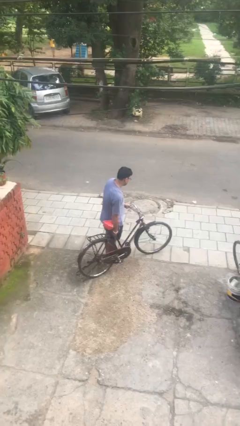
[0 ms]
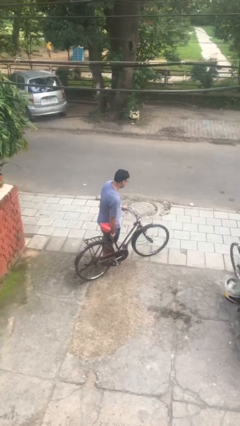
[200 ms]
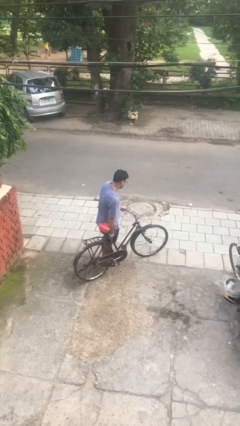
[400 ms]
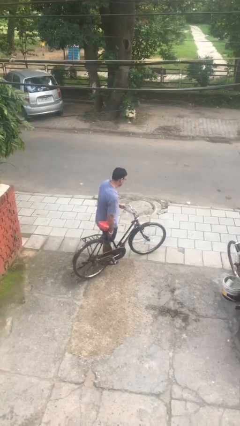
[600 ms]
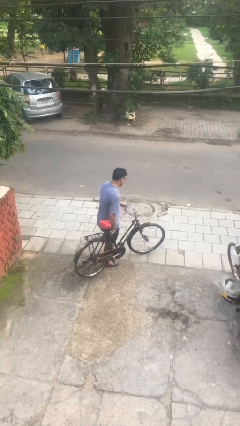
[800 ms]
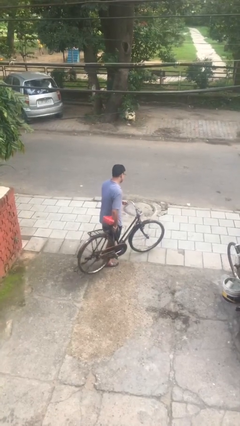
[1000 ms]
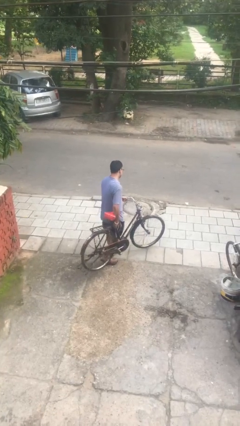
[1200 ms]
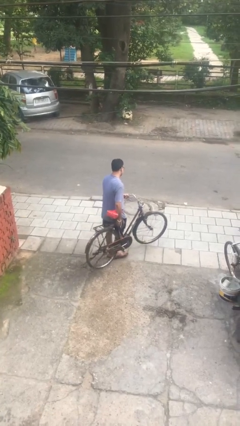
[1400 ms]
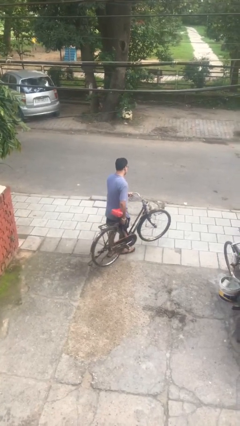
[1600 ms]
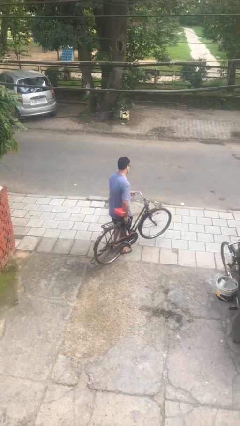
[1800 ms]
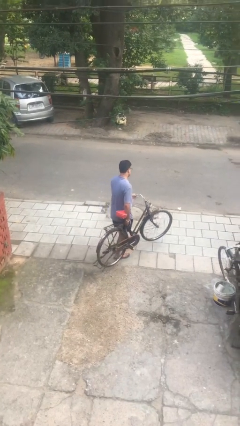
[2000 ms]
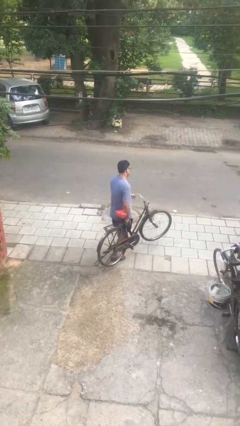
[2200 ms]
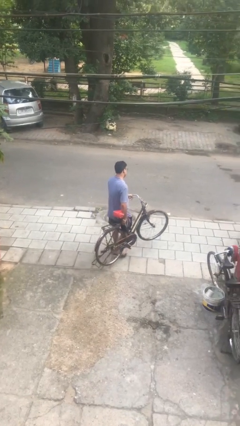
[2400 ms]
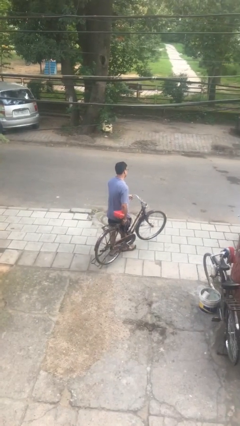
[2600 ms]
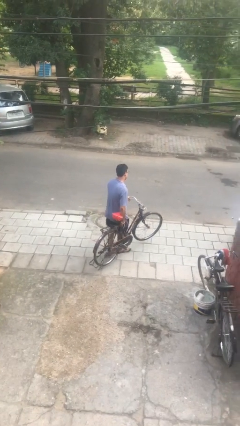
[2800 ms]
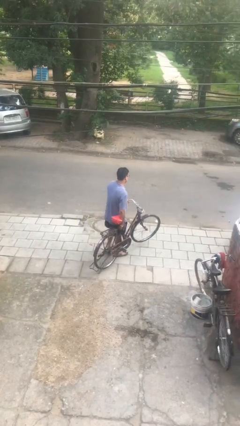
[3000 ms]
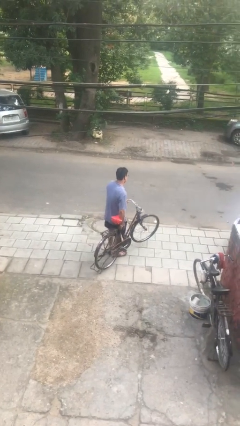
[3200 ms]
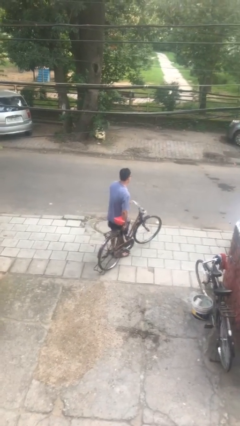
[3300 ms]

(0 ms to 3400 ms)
person carries bicycle

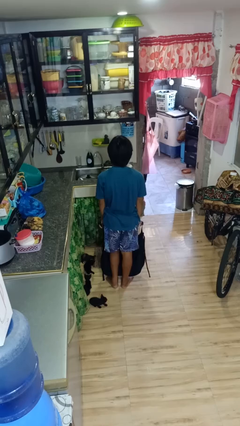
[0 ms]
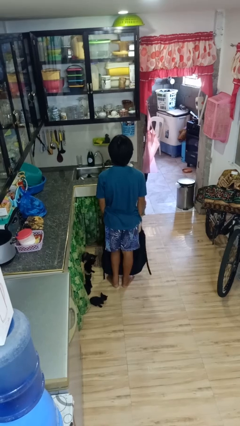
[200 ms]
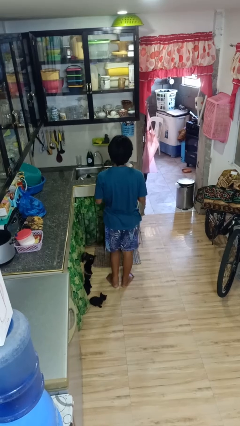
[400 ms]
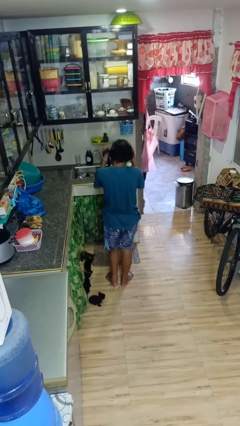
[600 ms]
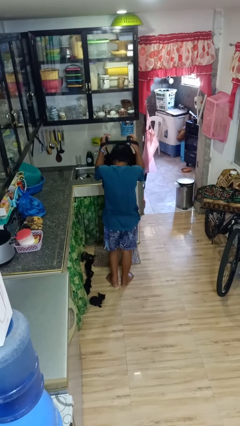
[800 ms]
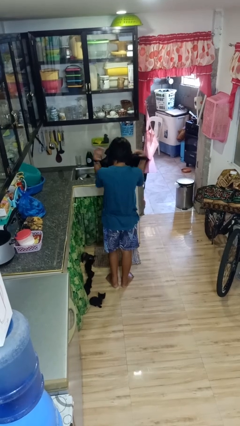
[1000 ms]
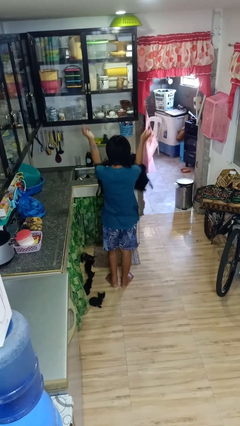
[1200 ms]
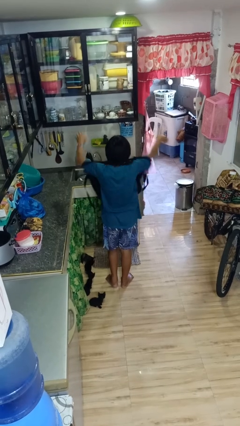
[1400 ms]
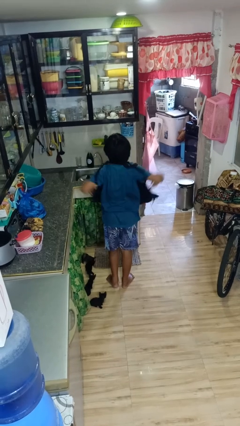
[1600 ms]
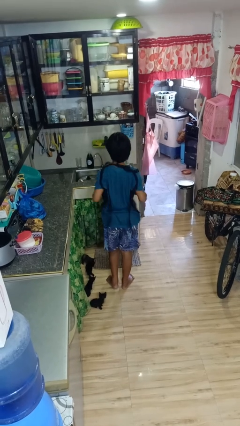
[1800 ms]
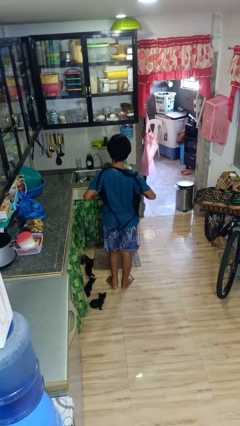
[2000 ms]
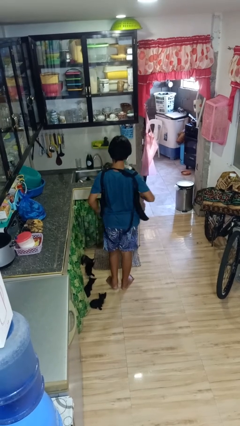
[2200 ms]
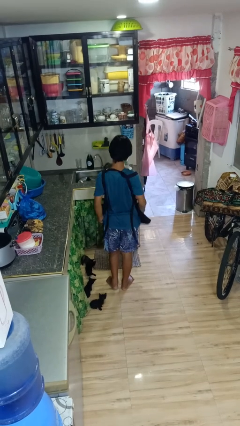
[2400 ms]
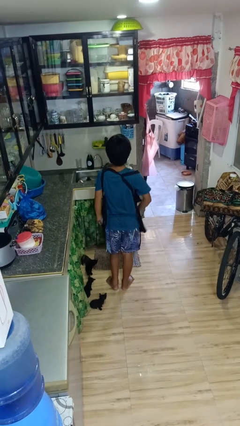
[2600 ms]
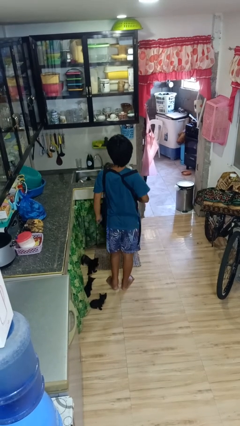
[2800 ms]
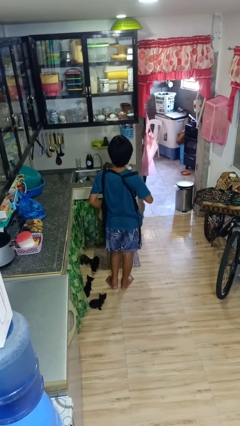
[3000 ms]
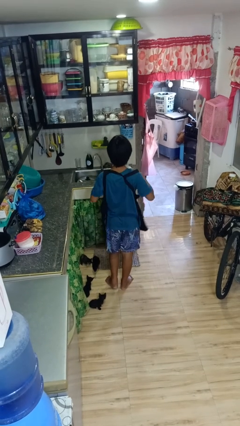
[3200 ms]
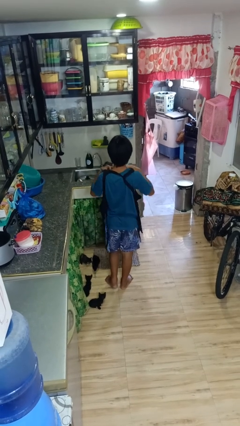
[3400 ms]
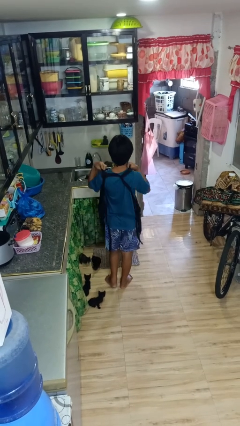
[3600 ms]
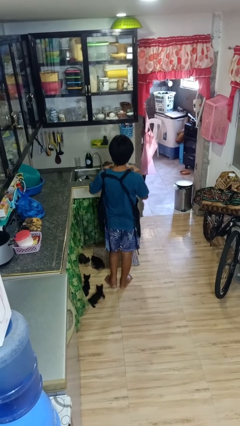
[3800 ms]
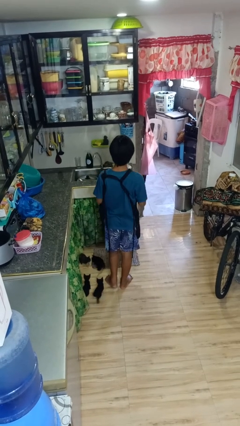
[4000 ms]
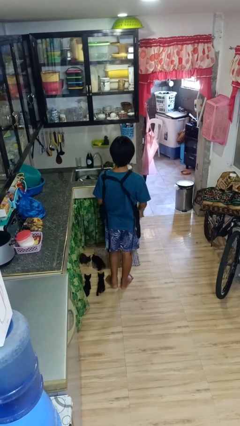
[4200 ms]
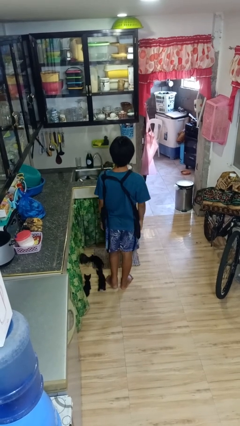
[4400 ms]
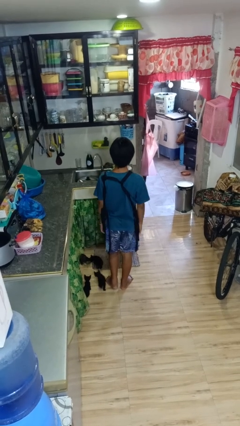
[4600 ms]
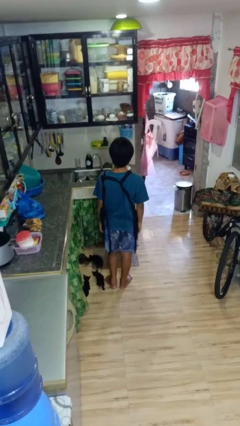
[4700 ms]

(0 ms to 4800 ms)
person puts on apron

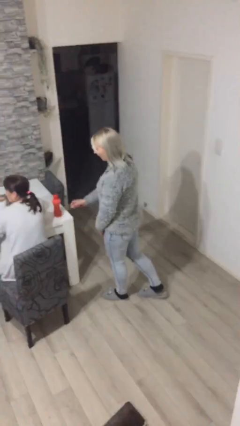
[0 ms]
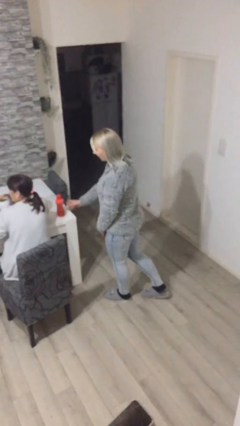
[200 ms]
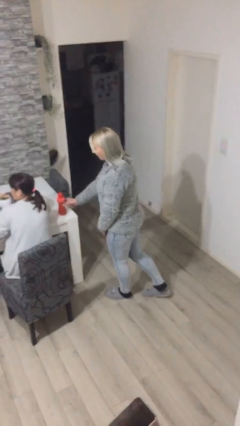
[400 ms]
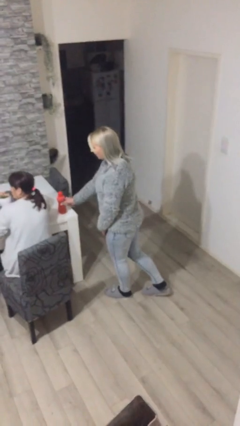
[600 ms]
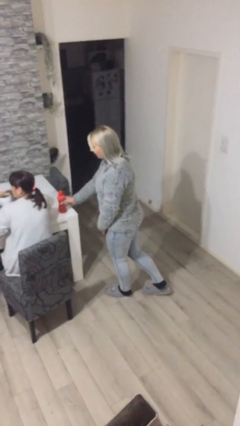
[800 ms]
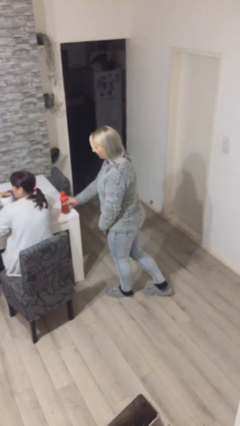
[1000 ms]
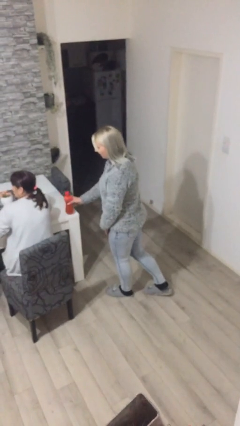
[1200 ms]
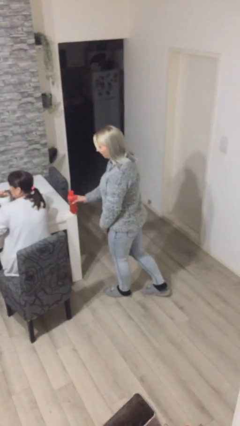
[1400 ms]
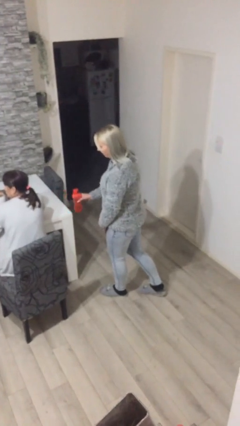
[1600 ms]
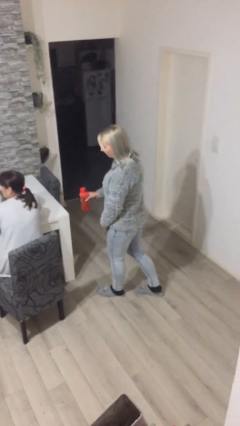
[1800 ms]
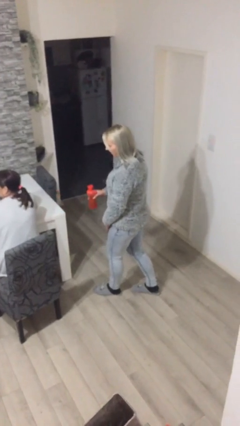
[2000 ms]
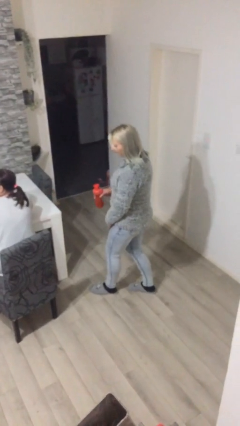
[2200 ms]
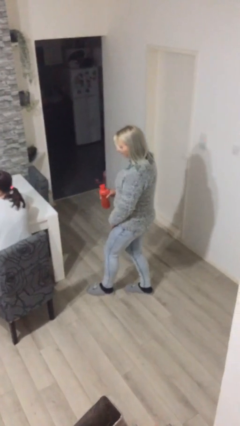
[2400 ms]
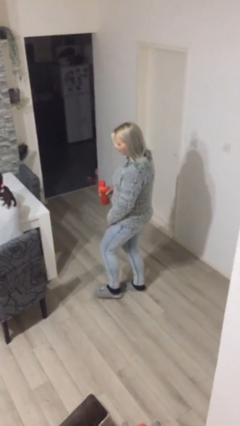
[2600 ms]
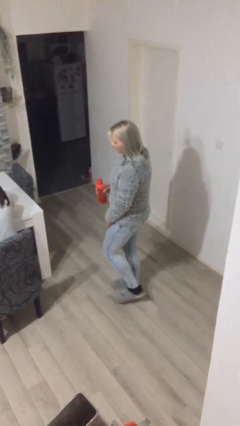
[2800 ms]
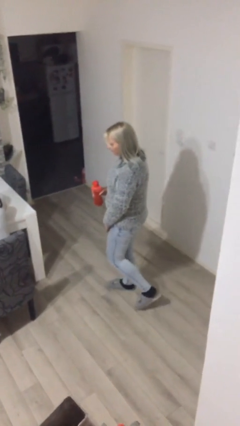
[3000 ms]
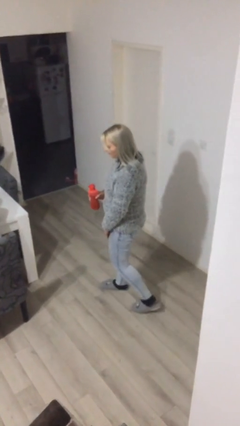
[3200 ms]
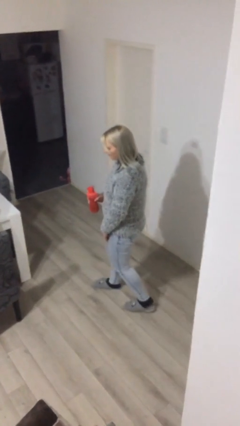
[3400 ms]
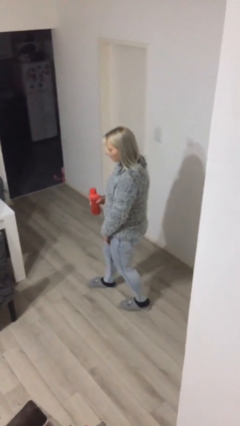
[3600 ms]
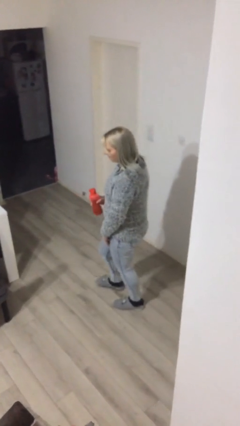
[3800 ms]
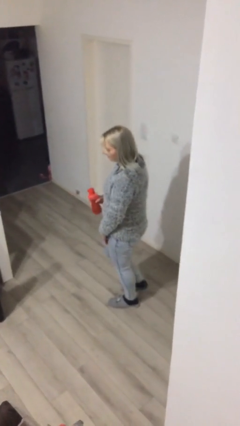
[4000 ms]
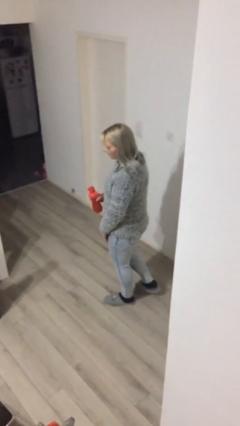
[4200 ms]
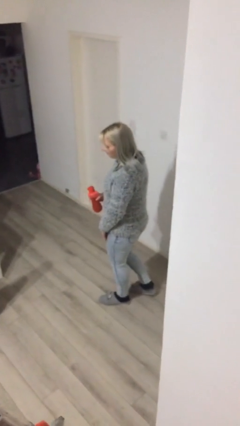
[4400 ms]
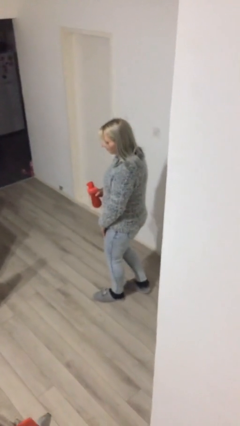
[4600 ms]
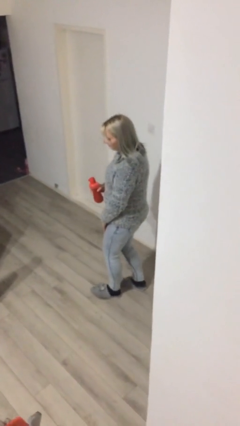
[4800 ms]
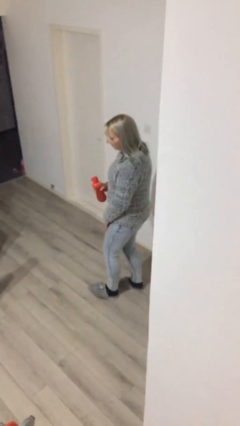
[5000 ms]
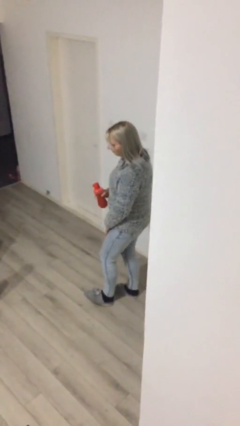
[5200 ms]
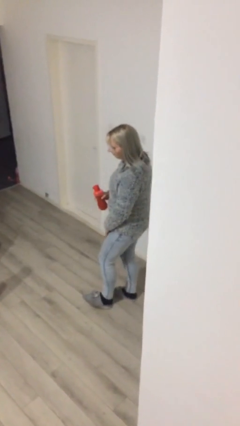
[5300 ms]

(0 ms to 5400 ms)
person steals object from person

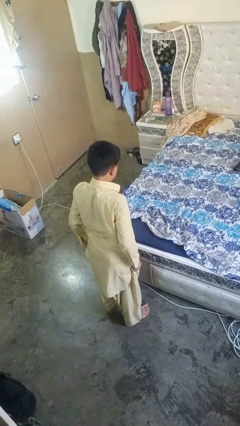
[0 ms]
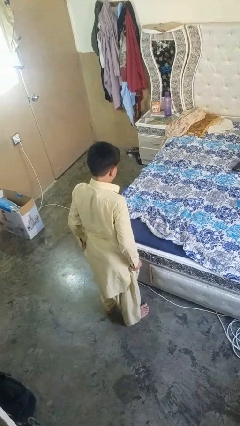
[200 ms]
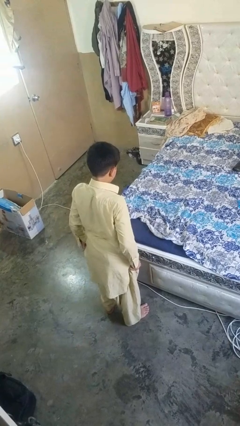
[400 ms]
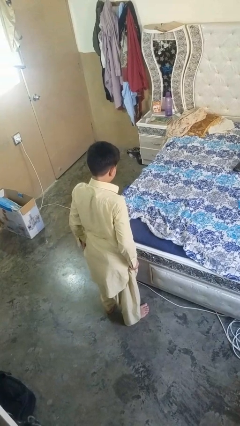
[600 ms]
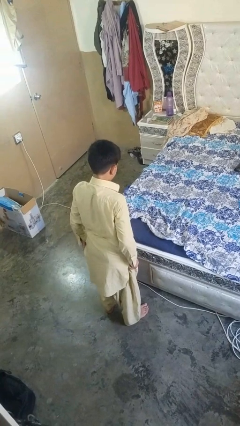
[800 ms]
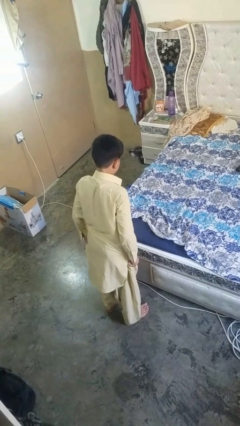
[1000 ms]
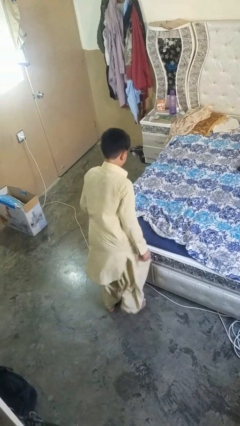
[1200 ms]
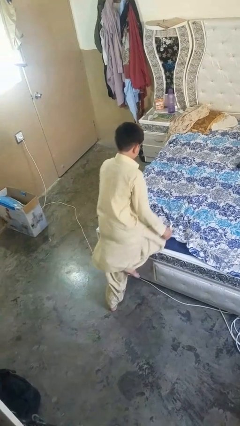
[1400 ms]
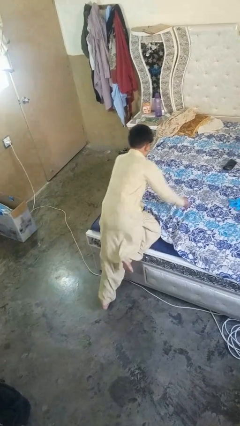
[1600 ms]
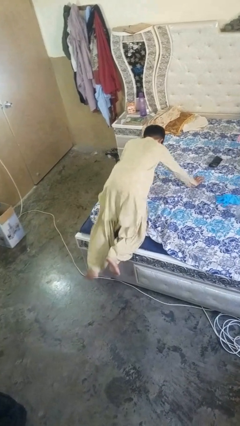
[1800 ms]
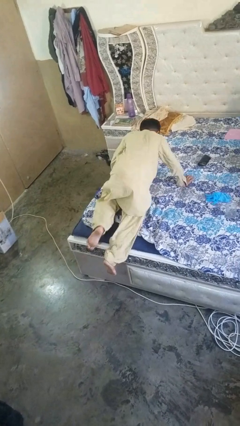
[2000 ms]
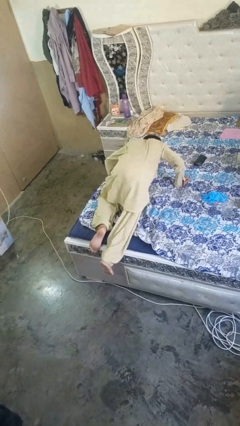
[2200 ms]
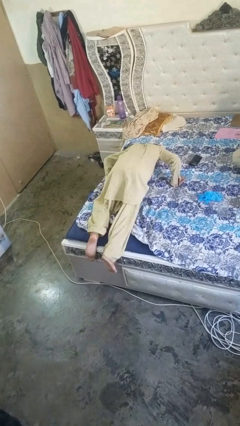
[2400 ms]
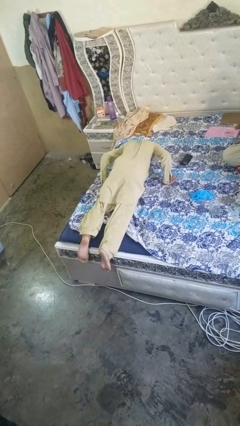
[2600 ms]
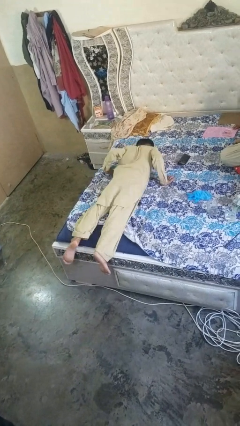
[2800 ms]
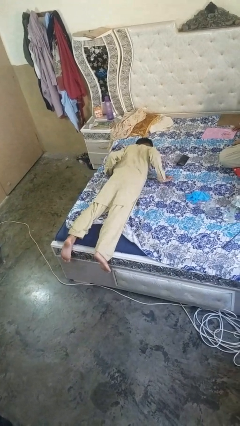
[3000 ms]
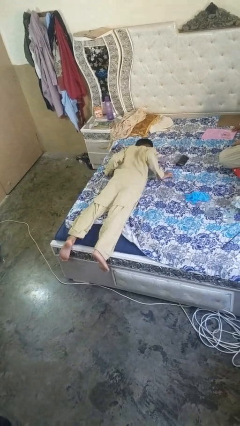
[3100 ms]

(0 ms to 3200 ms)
person lies down on bed

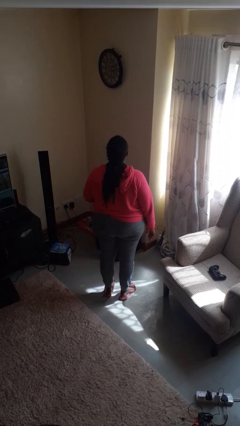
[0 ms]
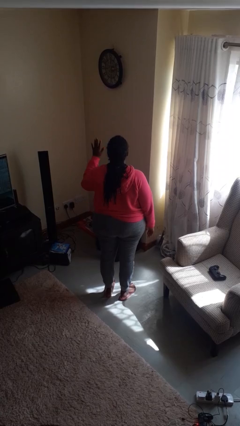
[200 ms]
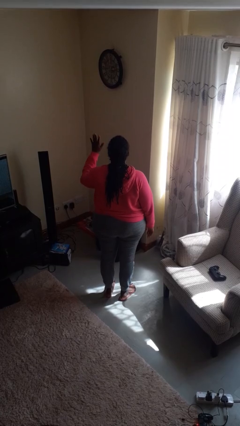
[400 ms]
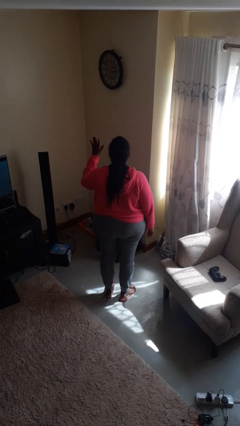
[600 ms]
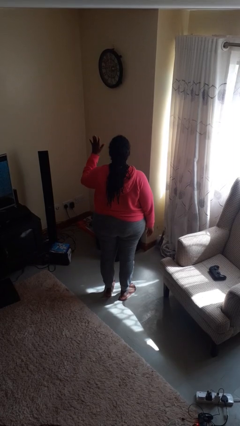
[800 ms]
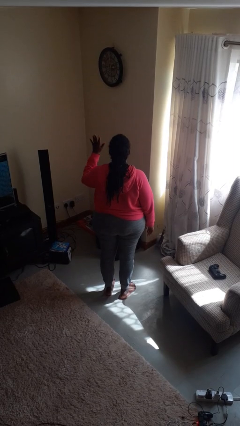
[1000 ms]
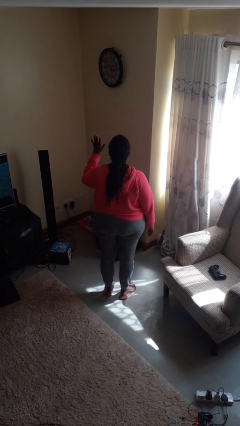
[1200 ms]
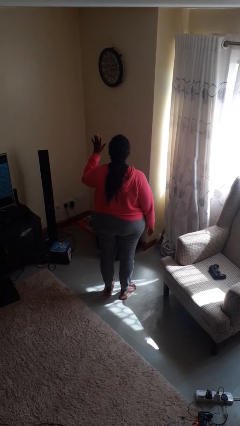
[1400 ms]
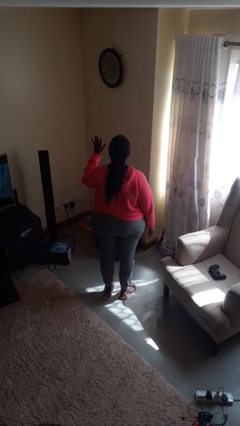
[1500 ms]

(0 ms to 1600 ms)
person gestures number five
